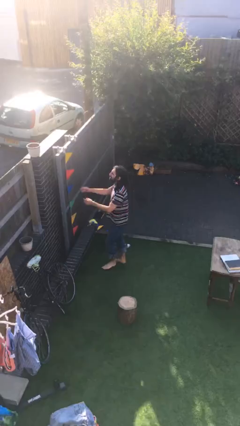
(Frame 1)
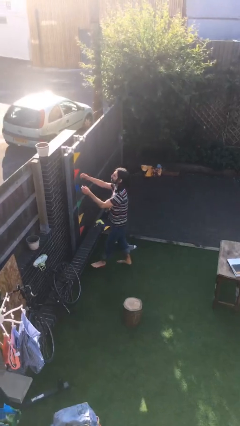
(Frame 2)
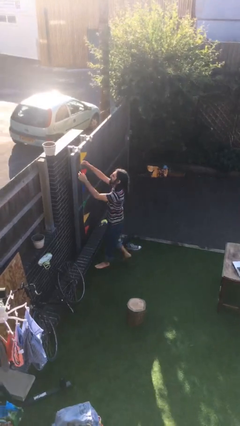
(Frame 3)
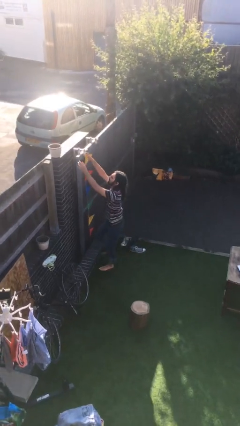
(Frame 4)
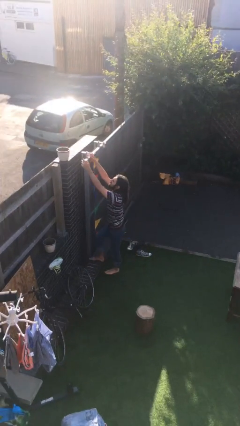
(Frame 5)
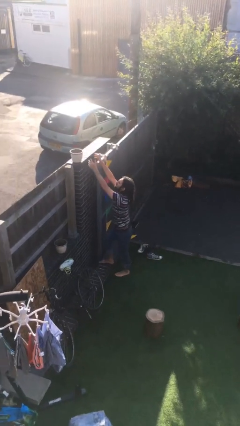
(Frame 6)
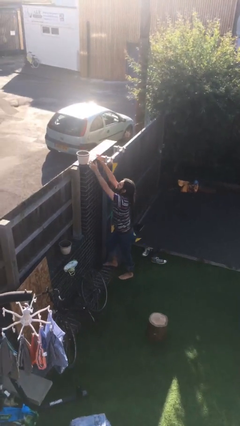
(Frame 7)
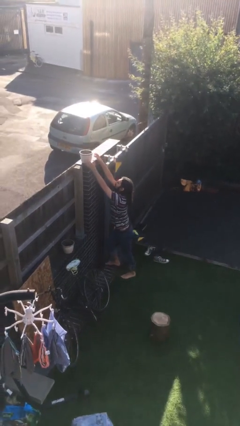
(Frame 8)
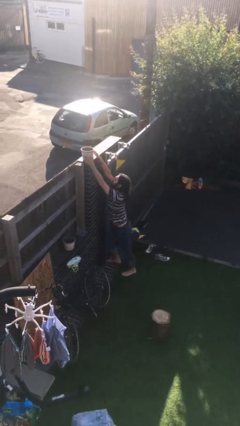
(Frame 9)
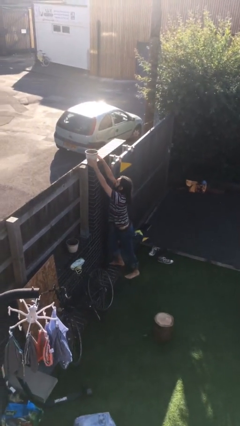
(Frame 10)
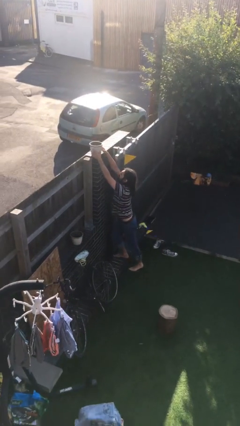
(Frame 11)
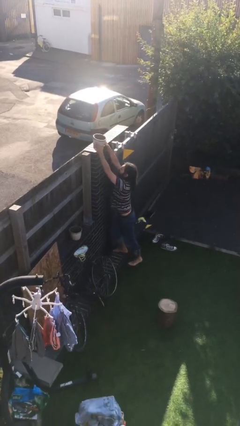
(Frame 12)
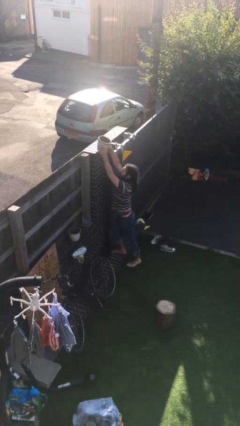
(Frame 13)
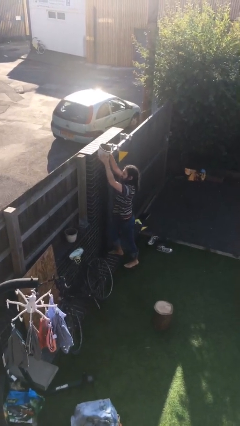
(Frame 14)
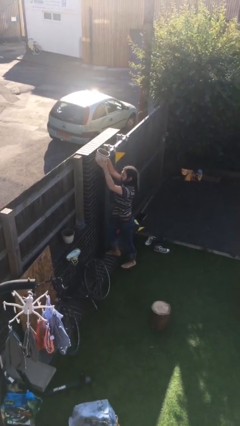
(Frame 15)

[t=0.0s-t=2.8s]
person picks up object from shelf

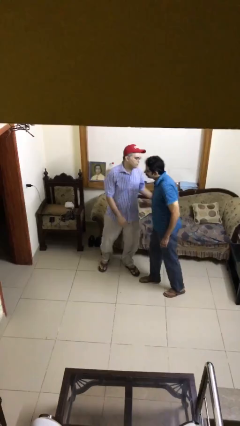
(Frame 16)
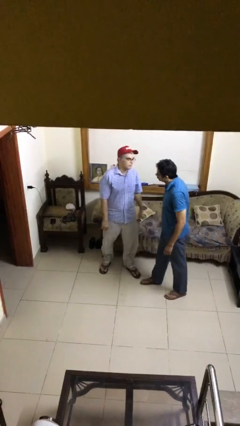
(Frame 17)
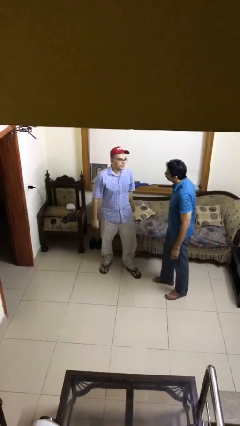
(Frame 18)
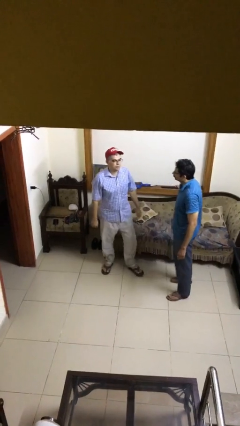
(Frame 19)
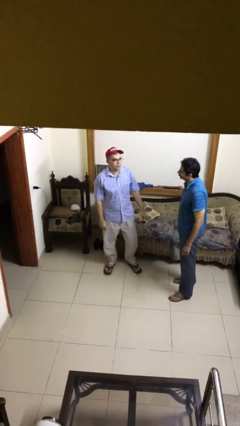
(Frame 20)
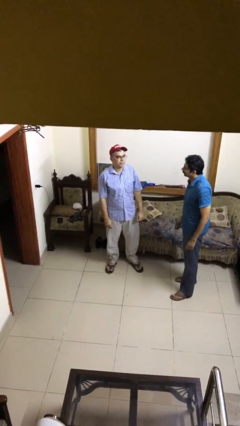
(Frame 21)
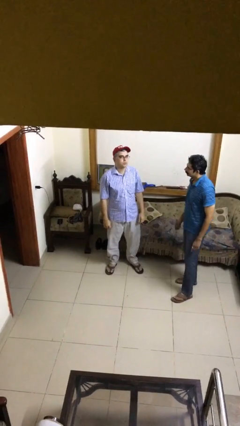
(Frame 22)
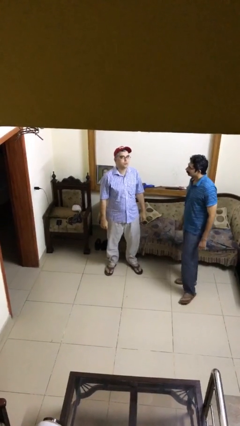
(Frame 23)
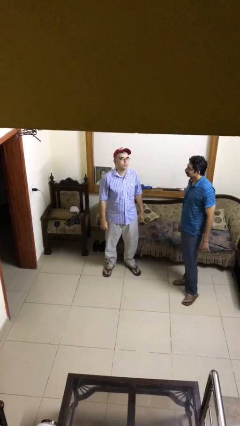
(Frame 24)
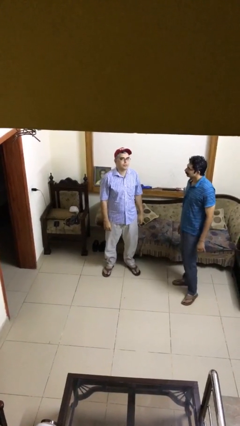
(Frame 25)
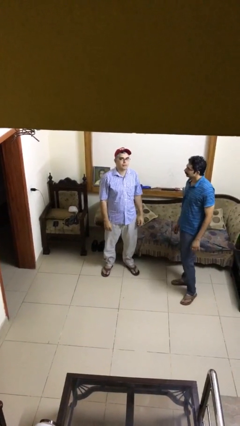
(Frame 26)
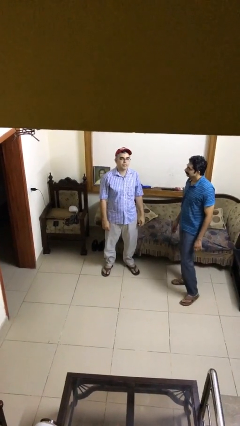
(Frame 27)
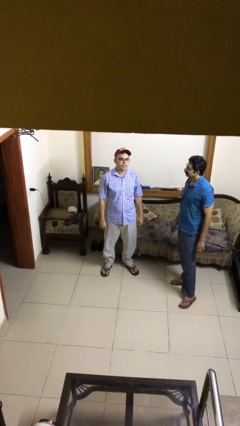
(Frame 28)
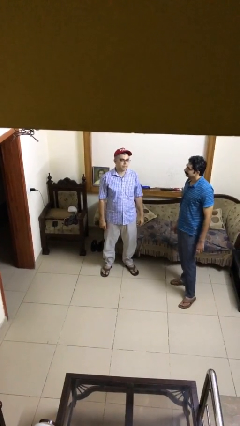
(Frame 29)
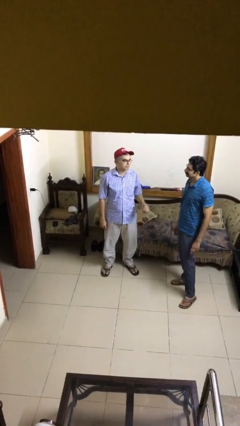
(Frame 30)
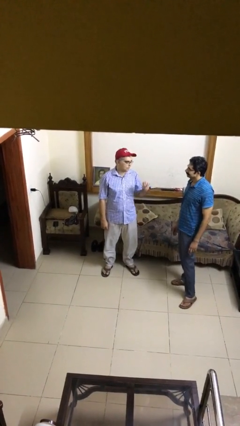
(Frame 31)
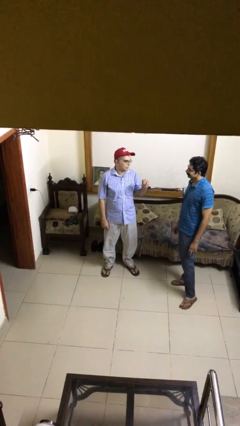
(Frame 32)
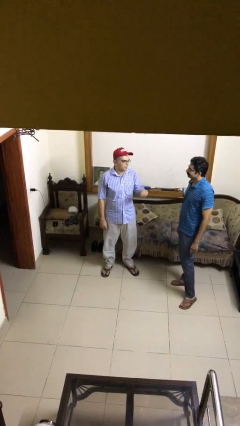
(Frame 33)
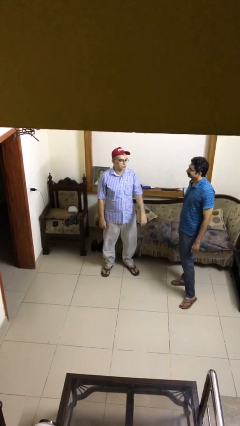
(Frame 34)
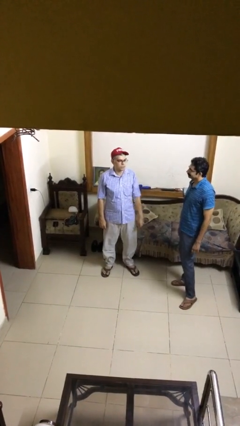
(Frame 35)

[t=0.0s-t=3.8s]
person talks to person

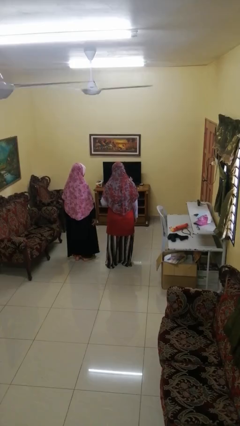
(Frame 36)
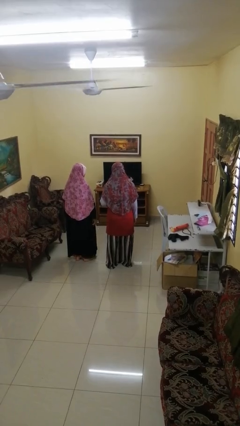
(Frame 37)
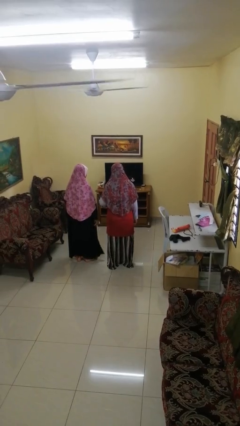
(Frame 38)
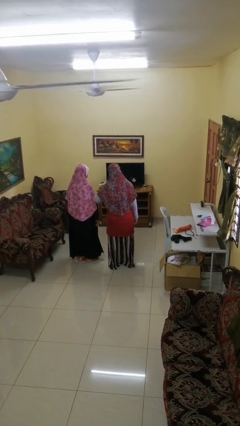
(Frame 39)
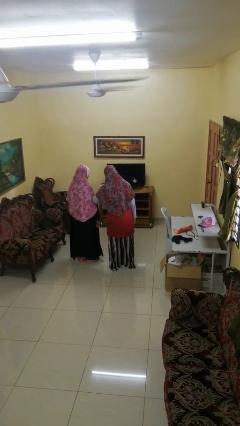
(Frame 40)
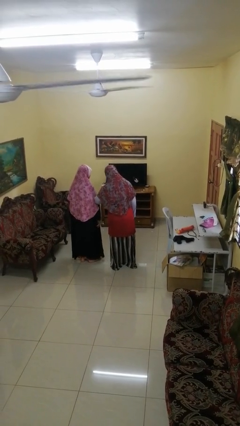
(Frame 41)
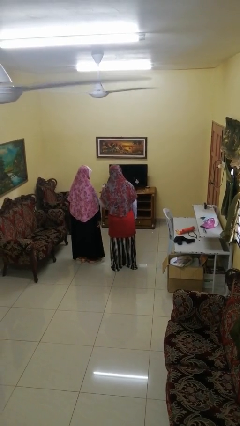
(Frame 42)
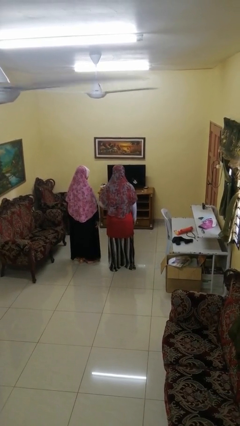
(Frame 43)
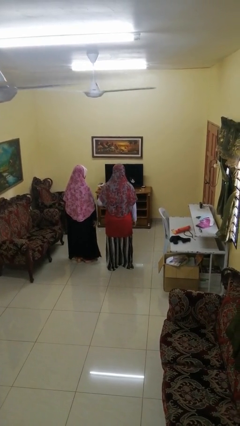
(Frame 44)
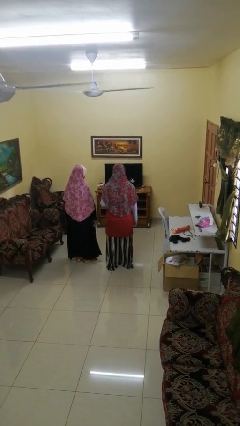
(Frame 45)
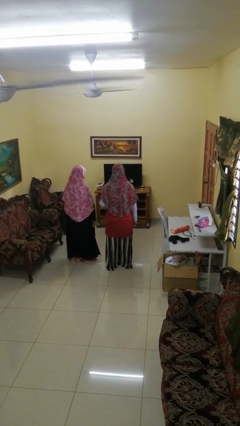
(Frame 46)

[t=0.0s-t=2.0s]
person nudges person with elbow

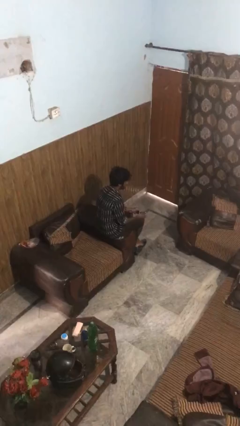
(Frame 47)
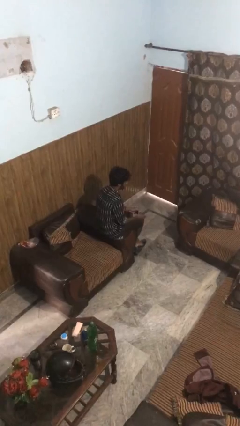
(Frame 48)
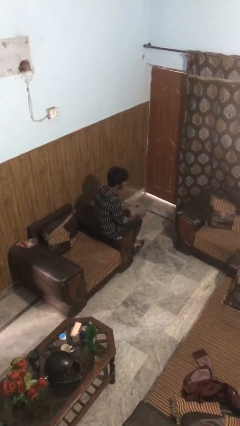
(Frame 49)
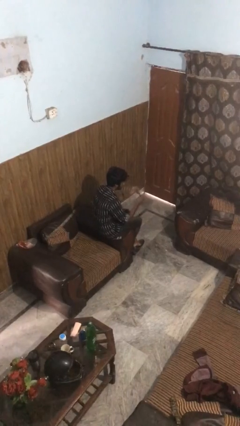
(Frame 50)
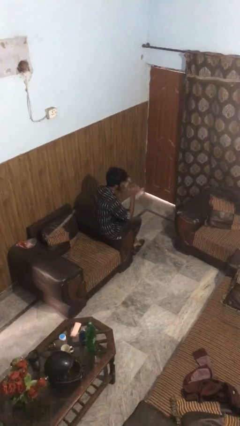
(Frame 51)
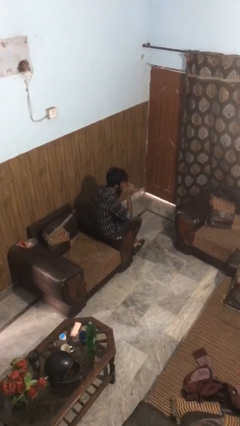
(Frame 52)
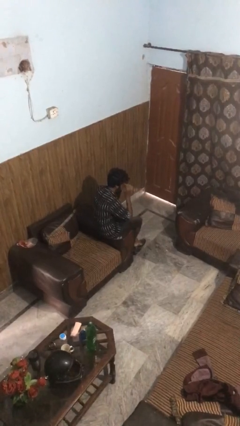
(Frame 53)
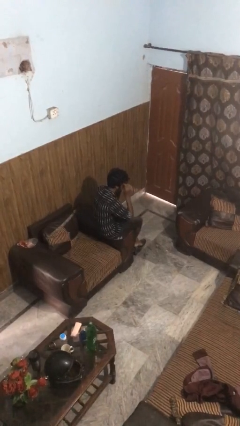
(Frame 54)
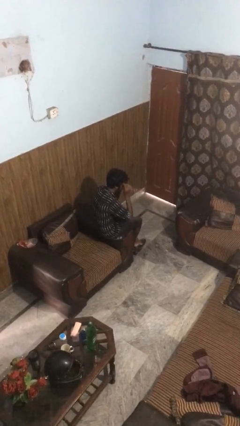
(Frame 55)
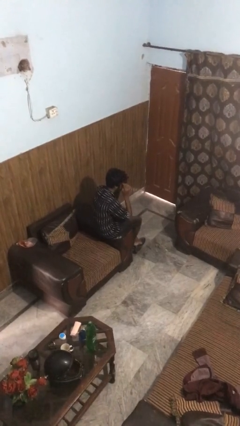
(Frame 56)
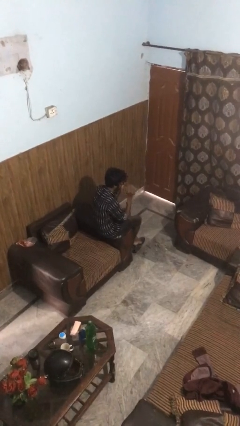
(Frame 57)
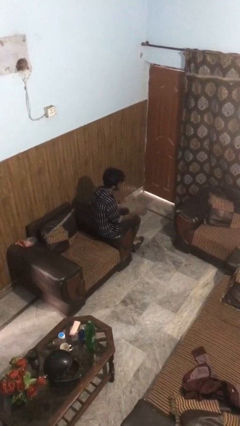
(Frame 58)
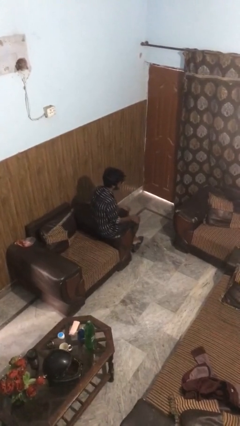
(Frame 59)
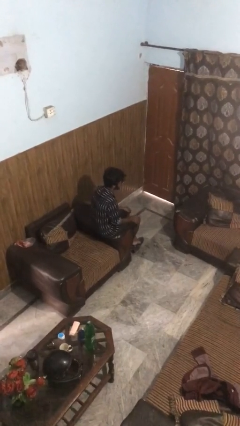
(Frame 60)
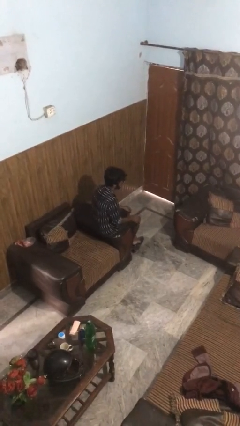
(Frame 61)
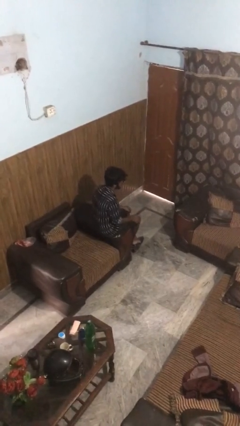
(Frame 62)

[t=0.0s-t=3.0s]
person puts on sunglasses

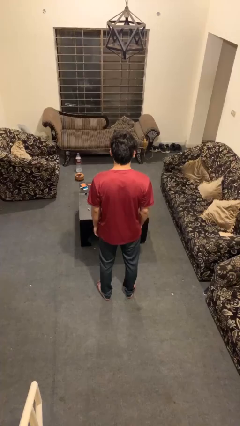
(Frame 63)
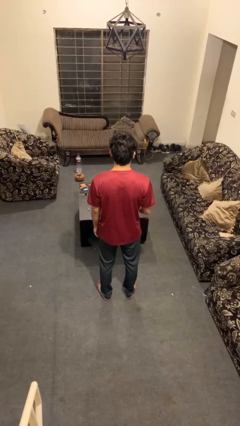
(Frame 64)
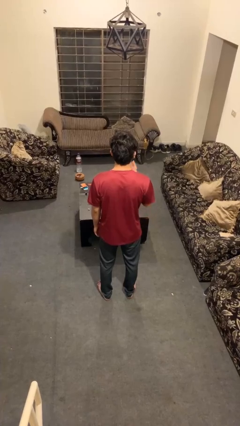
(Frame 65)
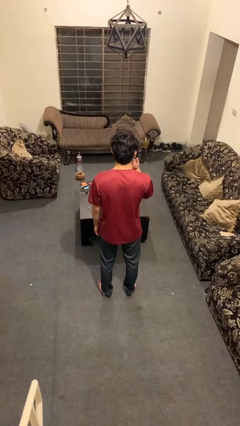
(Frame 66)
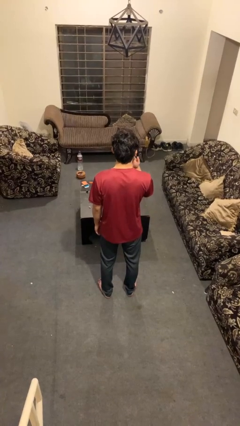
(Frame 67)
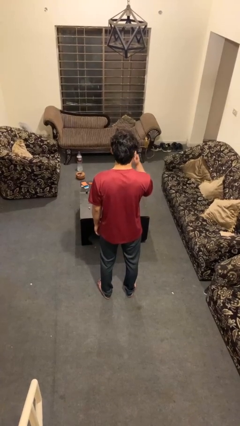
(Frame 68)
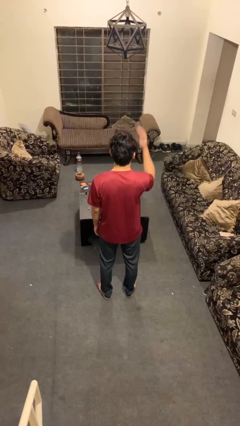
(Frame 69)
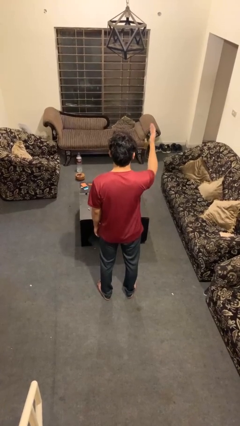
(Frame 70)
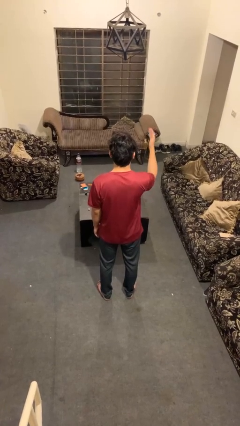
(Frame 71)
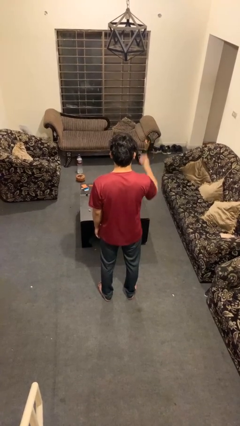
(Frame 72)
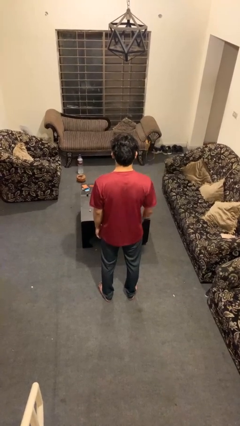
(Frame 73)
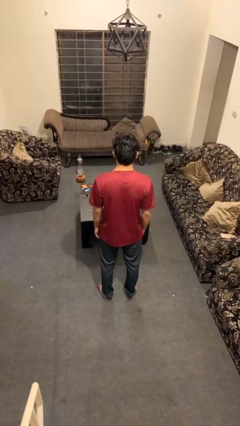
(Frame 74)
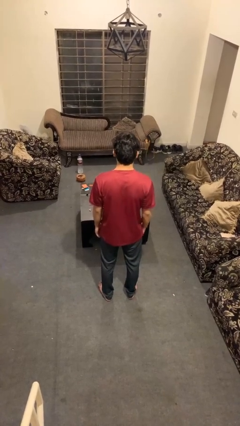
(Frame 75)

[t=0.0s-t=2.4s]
person gestures blow kiss

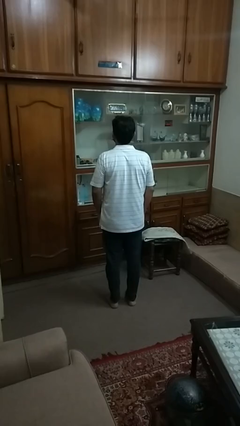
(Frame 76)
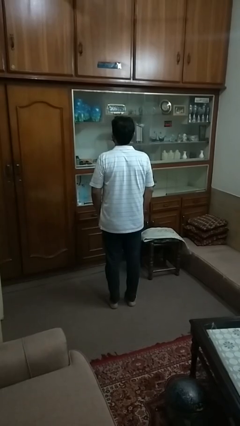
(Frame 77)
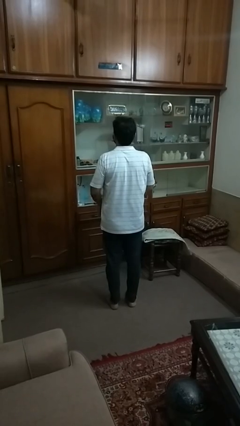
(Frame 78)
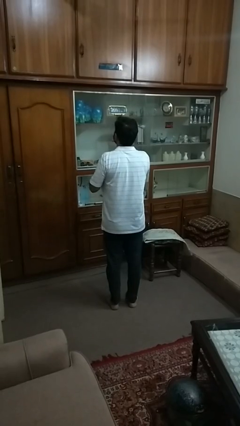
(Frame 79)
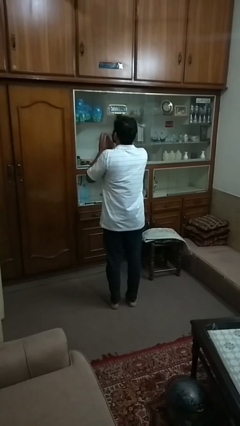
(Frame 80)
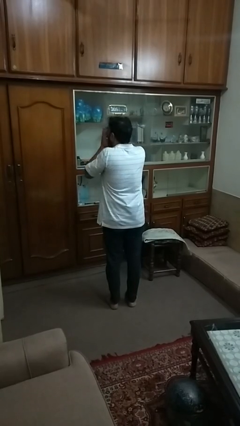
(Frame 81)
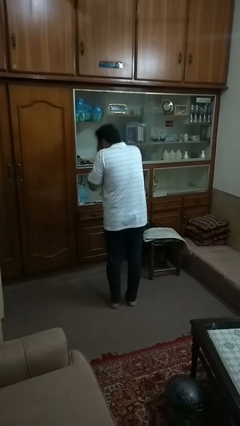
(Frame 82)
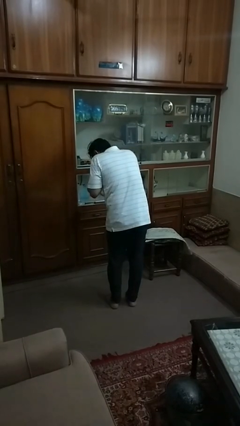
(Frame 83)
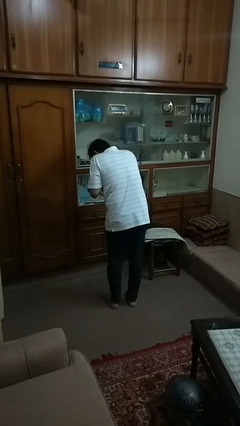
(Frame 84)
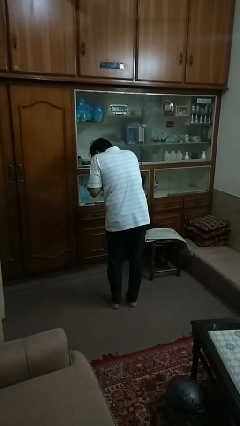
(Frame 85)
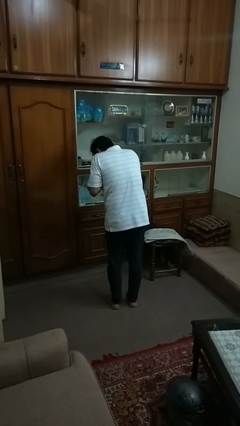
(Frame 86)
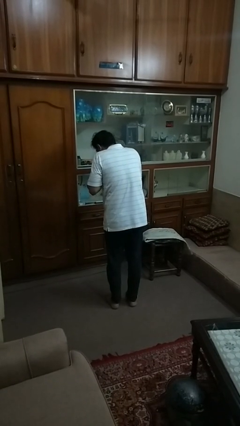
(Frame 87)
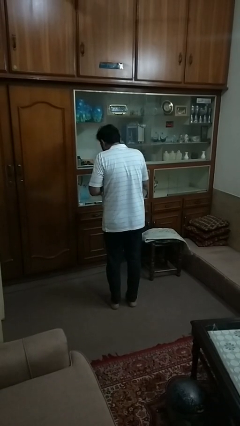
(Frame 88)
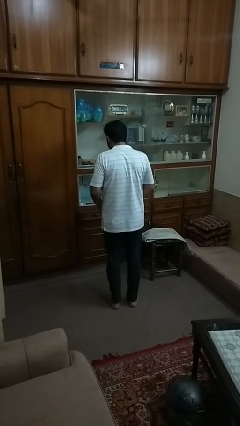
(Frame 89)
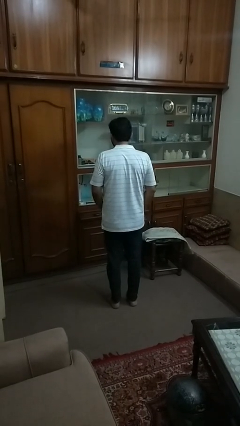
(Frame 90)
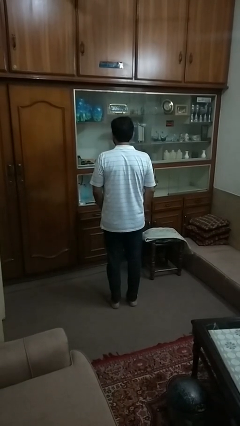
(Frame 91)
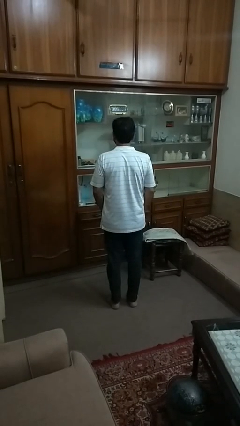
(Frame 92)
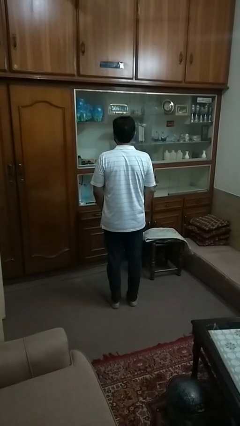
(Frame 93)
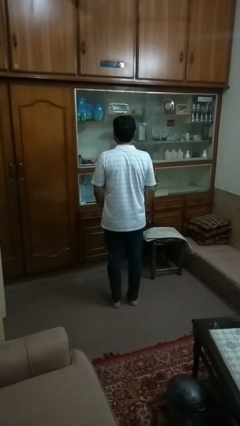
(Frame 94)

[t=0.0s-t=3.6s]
person sneezes into hand
